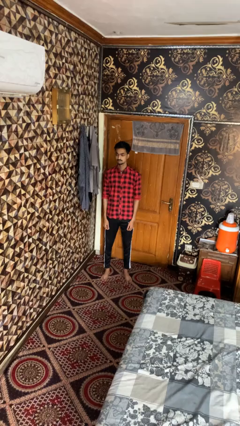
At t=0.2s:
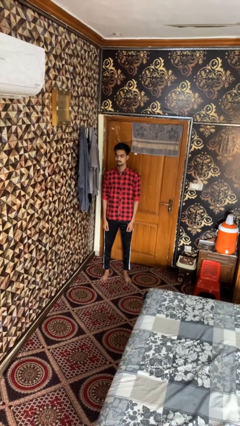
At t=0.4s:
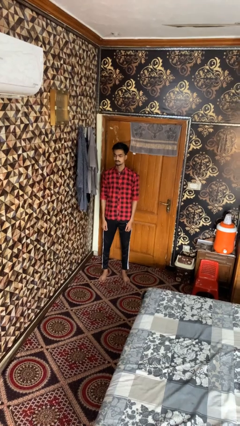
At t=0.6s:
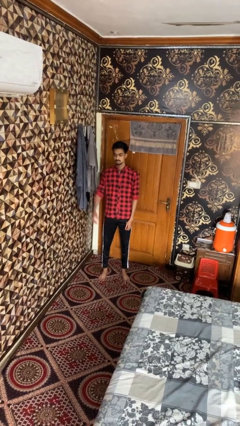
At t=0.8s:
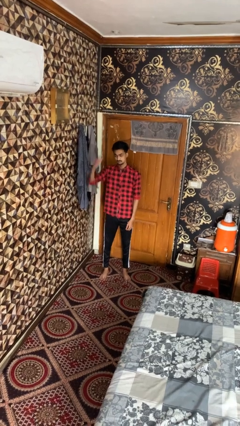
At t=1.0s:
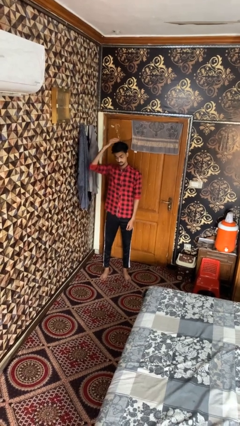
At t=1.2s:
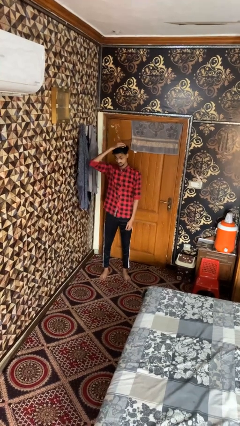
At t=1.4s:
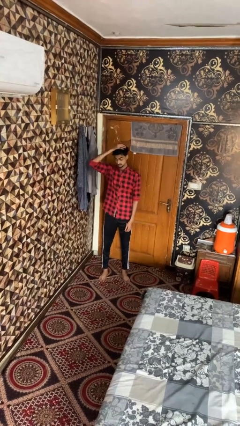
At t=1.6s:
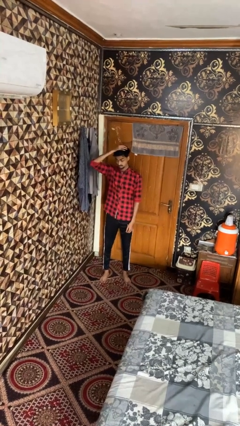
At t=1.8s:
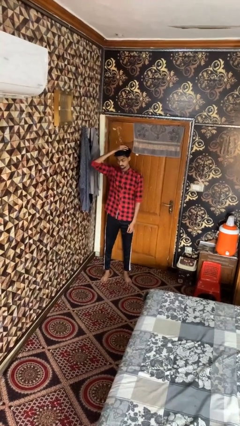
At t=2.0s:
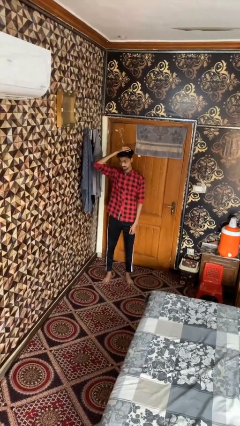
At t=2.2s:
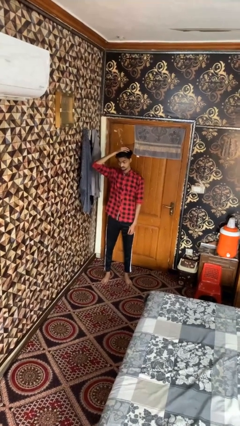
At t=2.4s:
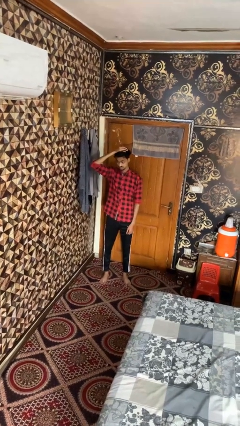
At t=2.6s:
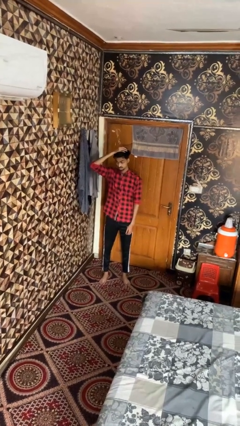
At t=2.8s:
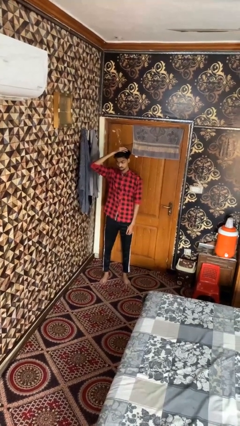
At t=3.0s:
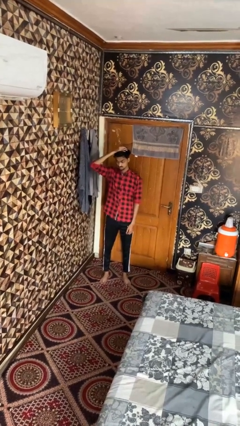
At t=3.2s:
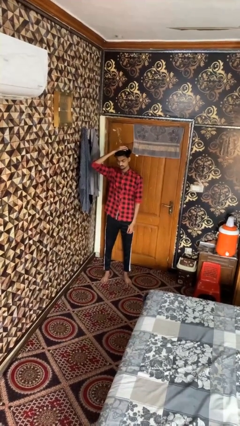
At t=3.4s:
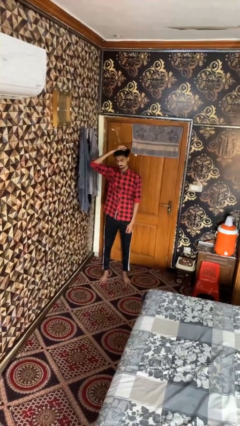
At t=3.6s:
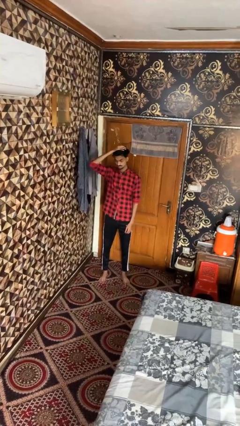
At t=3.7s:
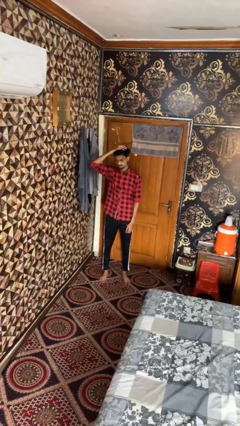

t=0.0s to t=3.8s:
person pats head

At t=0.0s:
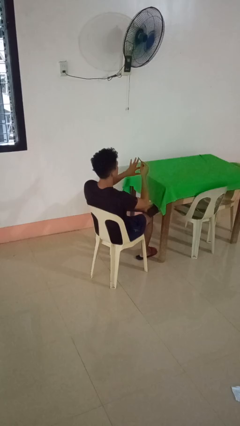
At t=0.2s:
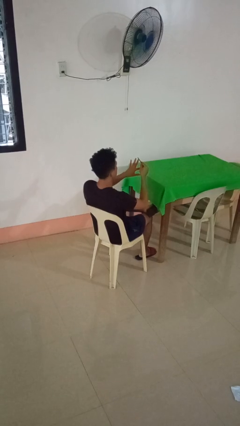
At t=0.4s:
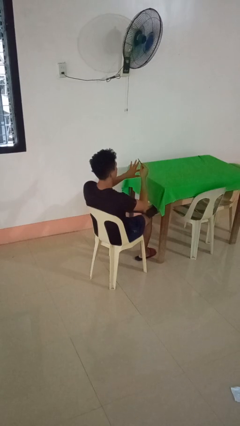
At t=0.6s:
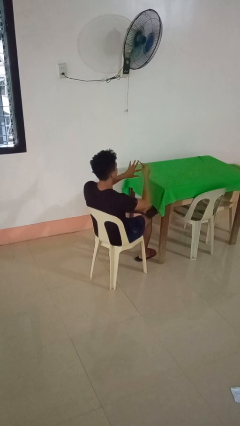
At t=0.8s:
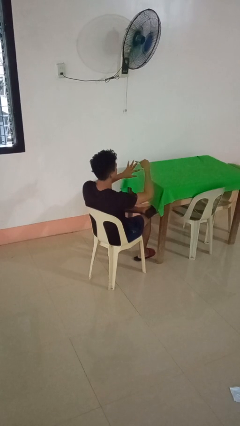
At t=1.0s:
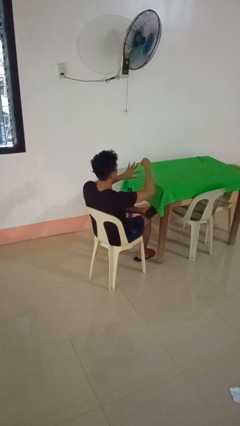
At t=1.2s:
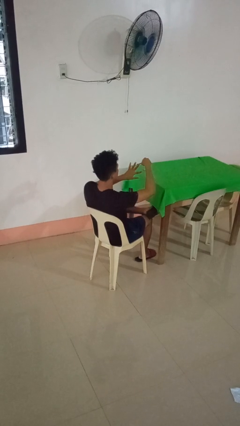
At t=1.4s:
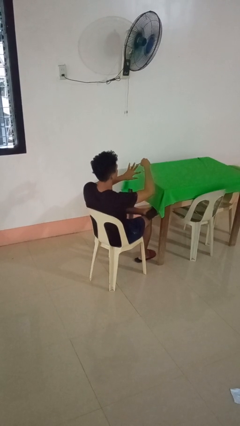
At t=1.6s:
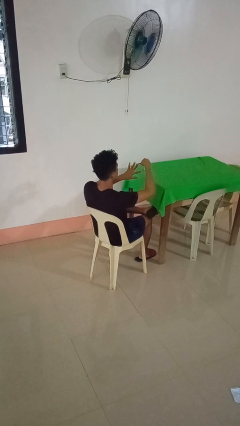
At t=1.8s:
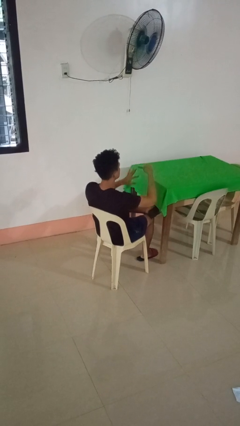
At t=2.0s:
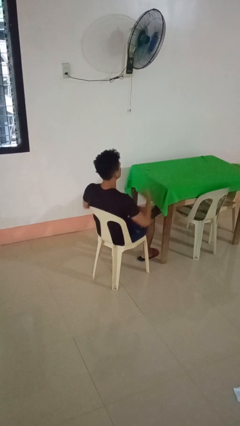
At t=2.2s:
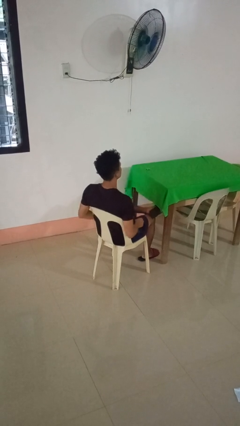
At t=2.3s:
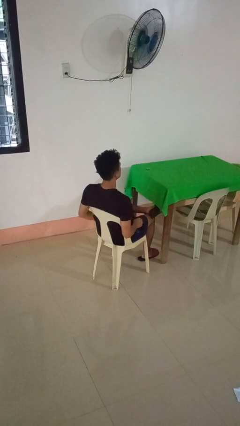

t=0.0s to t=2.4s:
person files fingernails

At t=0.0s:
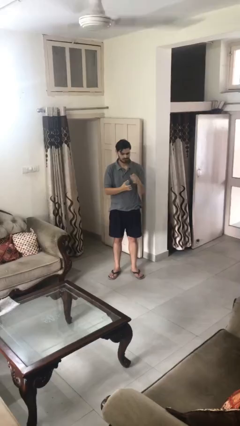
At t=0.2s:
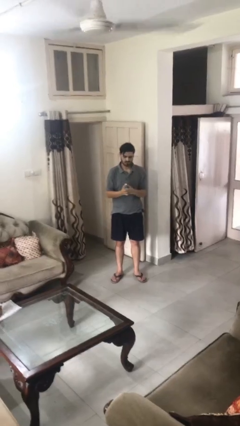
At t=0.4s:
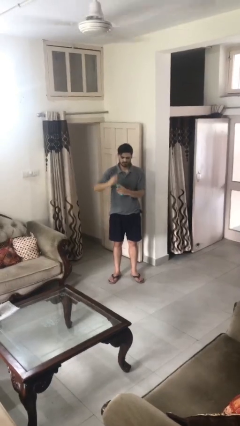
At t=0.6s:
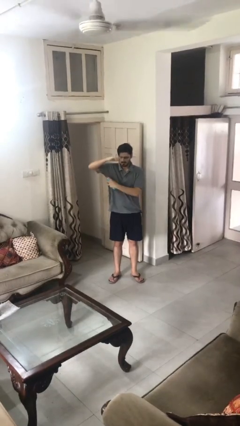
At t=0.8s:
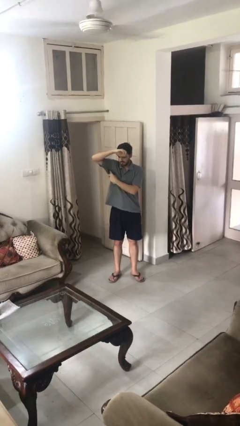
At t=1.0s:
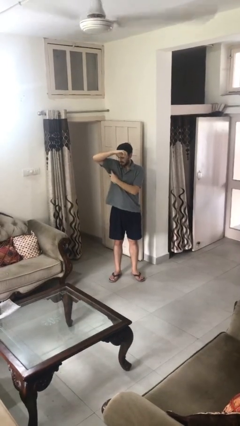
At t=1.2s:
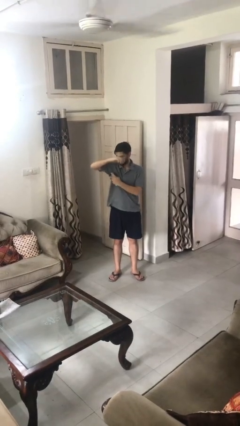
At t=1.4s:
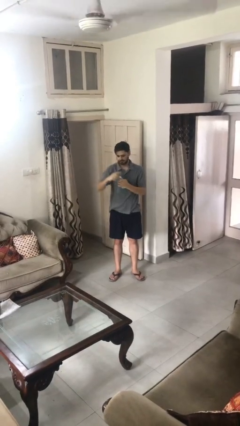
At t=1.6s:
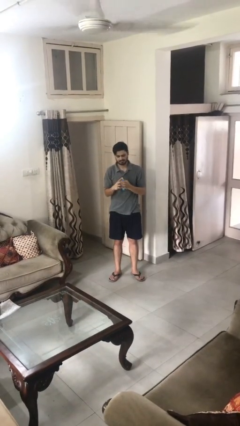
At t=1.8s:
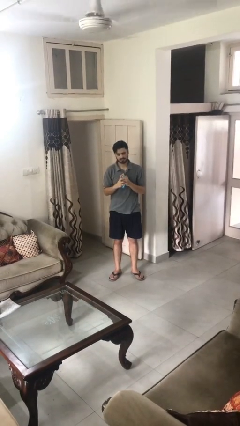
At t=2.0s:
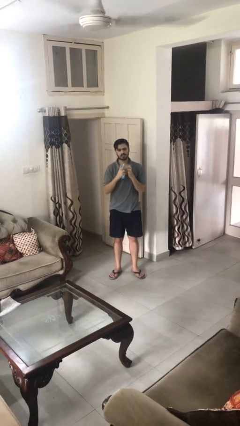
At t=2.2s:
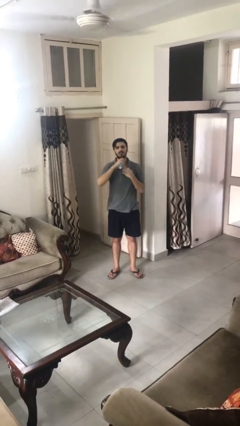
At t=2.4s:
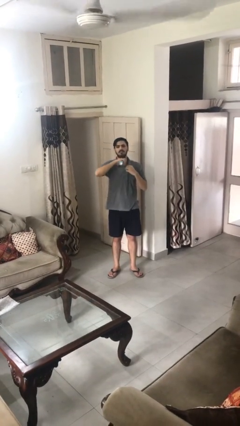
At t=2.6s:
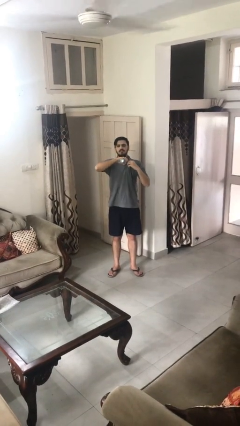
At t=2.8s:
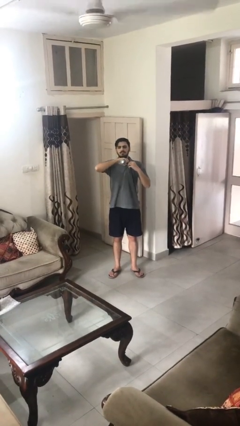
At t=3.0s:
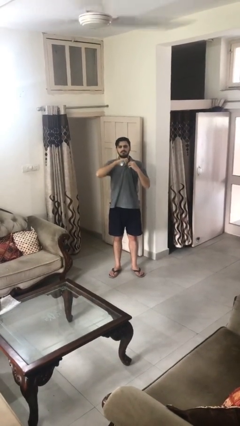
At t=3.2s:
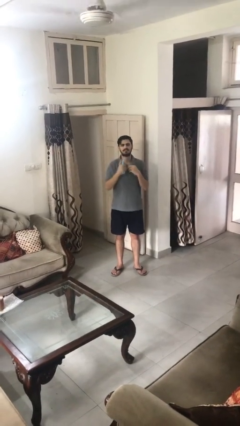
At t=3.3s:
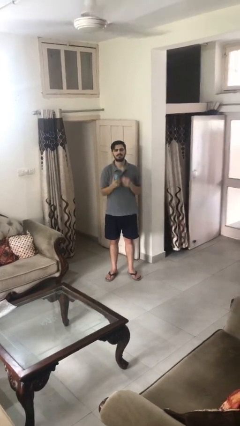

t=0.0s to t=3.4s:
person applies deodorant

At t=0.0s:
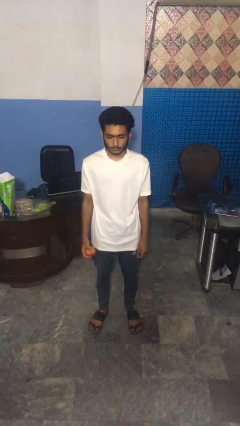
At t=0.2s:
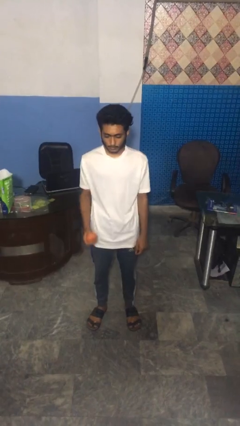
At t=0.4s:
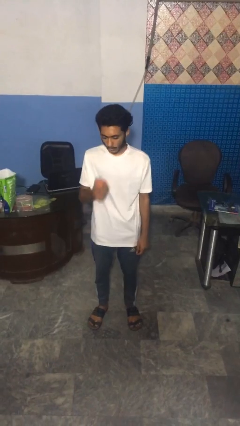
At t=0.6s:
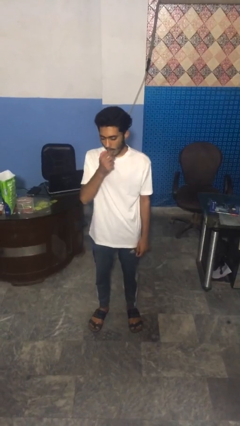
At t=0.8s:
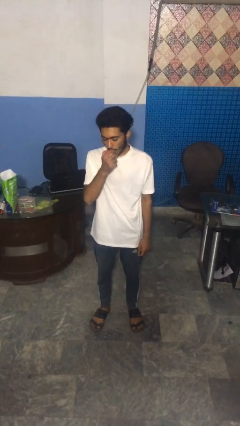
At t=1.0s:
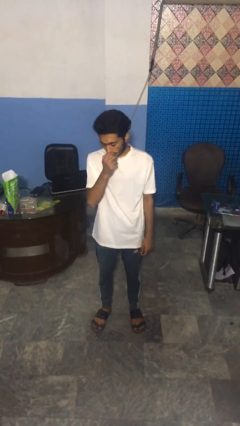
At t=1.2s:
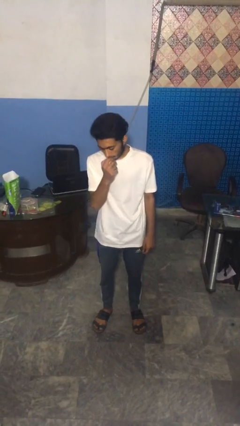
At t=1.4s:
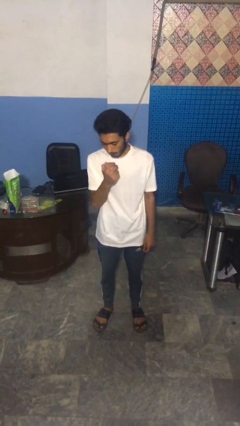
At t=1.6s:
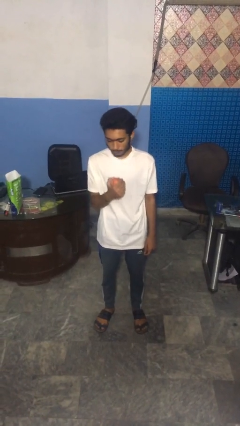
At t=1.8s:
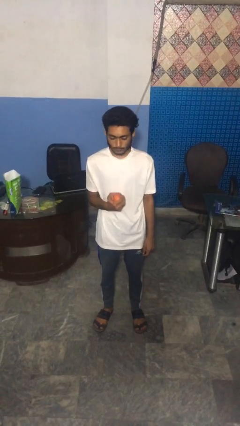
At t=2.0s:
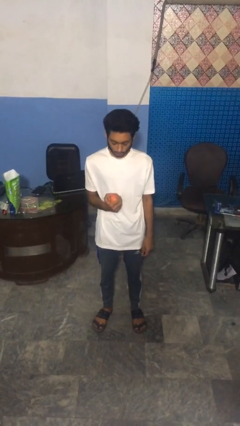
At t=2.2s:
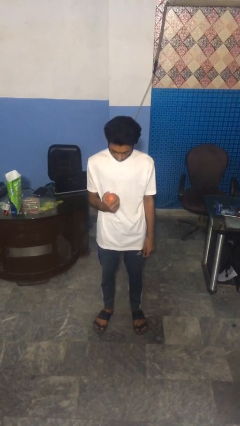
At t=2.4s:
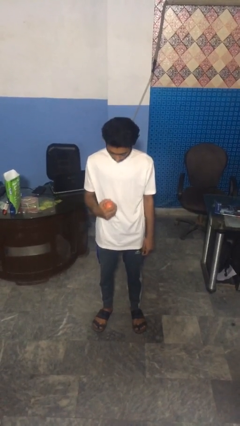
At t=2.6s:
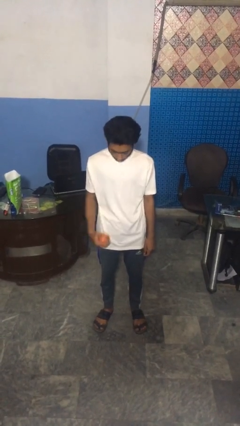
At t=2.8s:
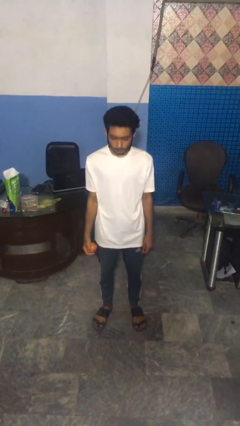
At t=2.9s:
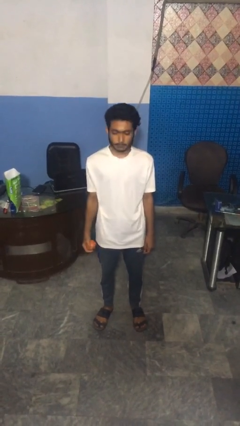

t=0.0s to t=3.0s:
person eats apple

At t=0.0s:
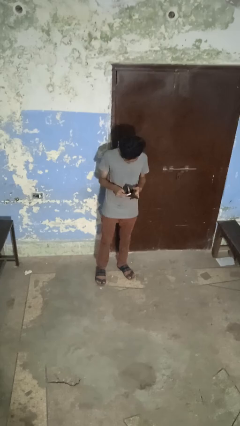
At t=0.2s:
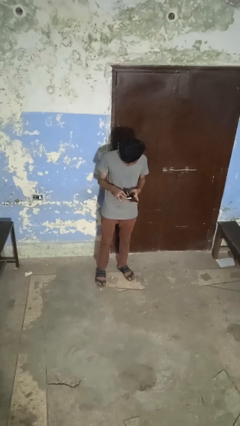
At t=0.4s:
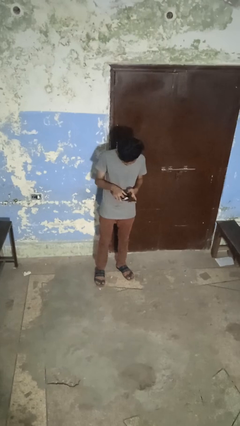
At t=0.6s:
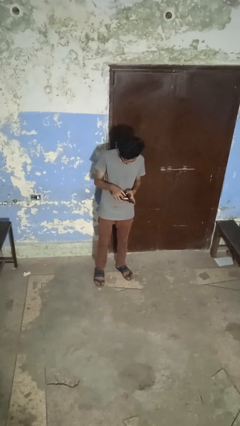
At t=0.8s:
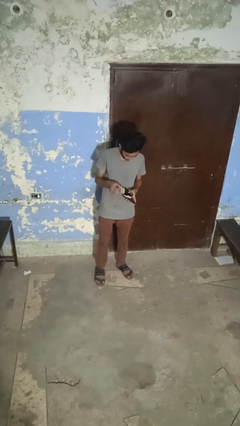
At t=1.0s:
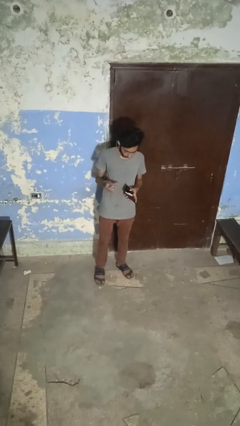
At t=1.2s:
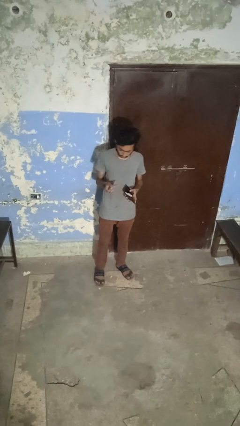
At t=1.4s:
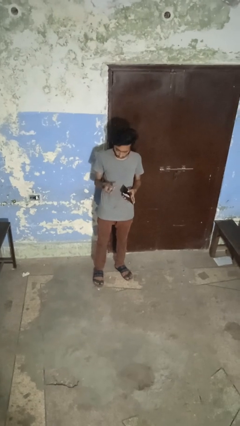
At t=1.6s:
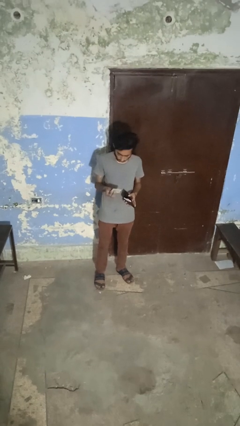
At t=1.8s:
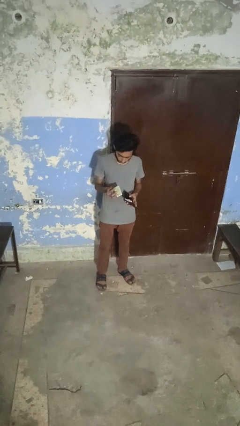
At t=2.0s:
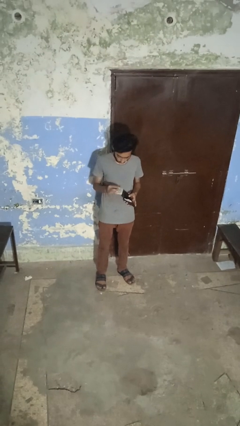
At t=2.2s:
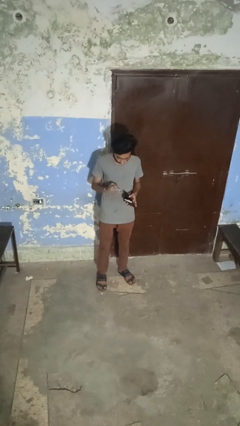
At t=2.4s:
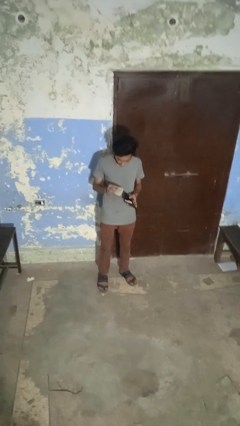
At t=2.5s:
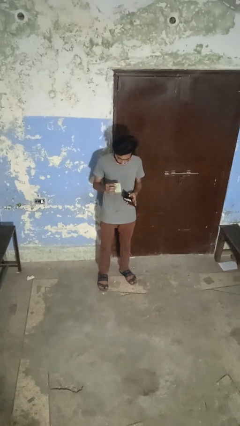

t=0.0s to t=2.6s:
person takes object from purse

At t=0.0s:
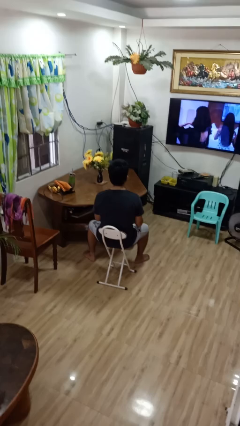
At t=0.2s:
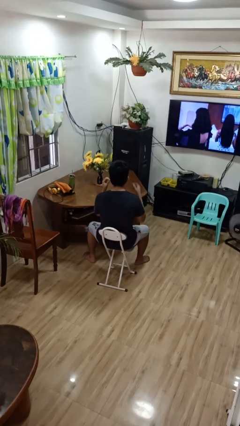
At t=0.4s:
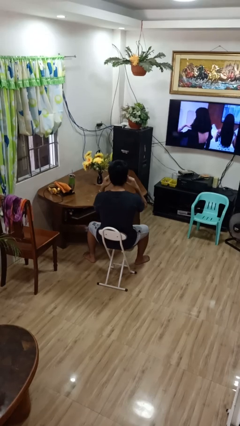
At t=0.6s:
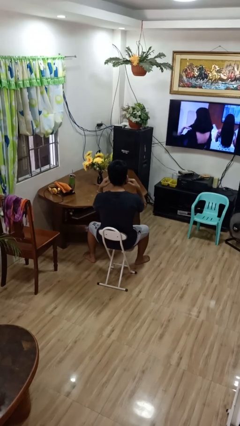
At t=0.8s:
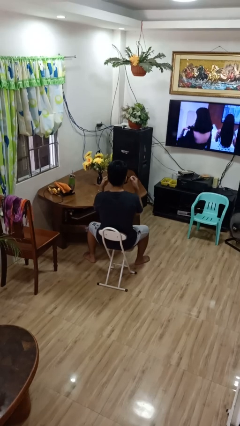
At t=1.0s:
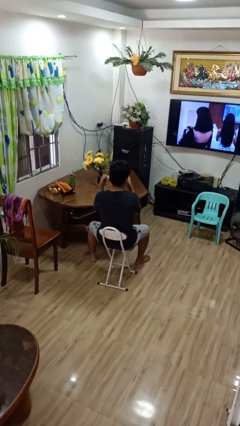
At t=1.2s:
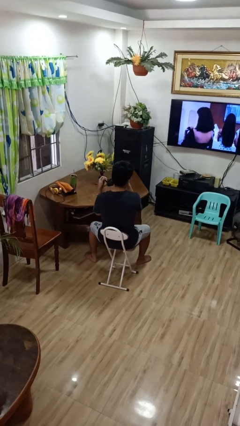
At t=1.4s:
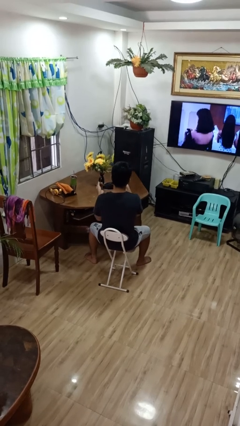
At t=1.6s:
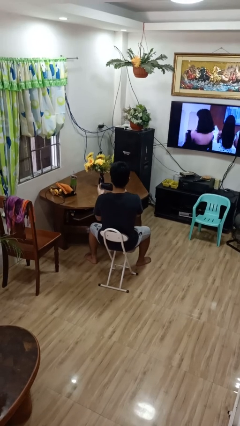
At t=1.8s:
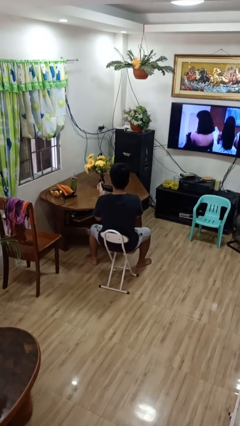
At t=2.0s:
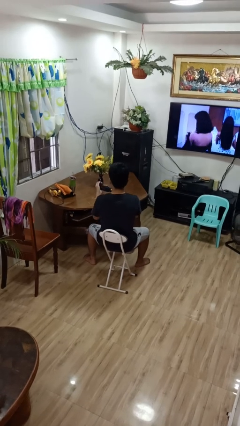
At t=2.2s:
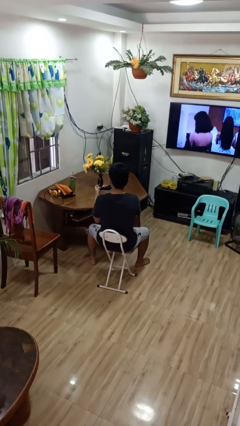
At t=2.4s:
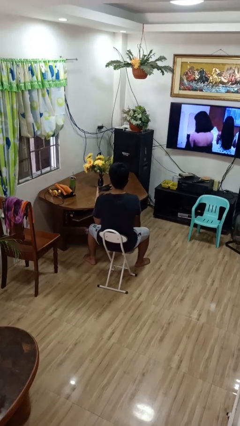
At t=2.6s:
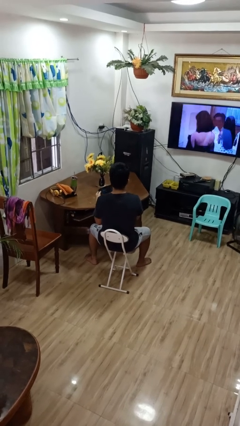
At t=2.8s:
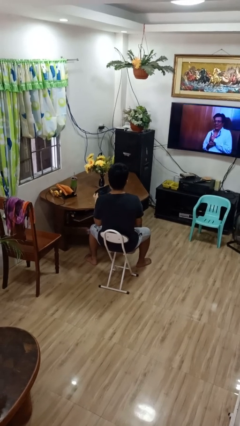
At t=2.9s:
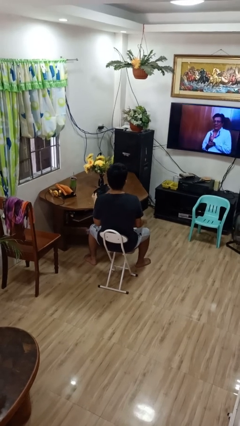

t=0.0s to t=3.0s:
person takes off facemask
